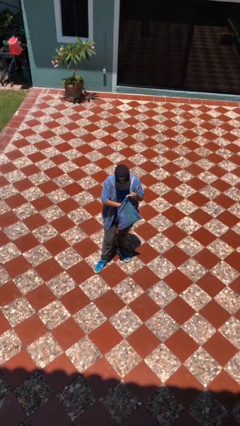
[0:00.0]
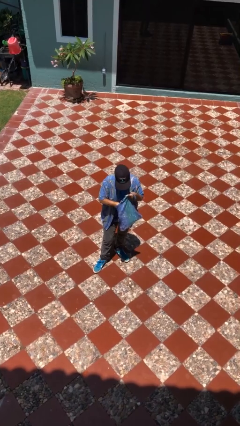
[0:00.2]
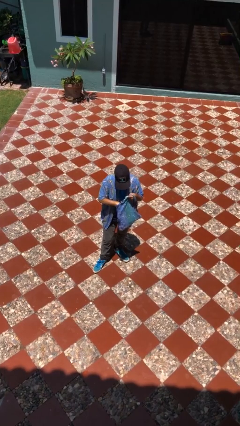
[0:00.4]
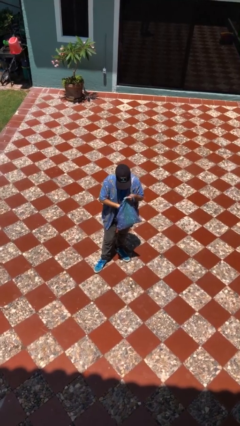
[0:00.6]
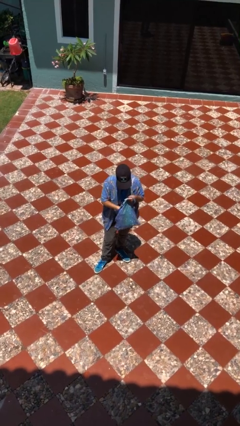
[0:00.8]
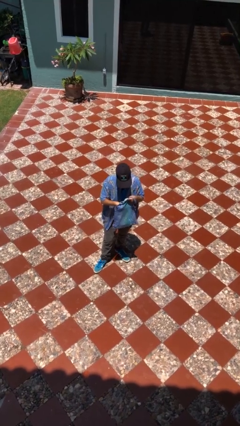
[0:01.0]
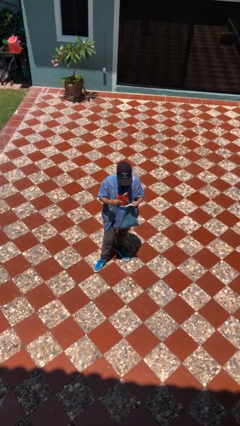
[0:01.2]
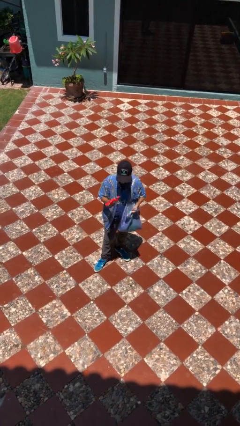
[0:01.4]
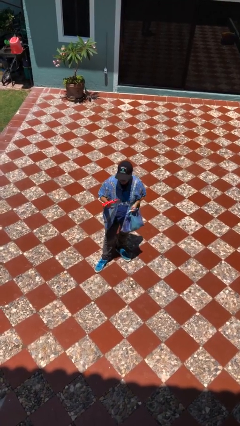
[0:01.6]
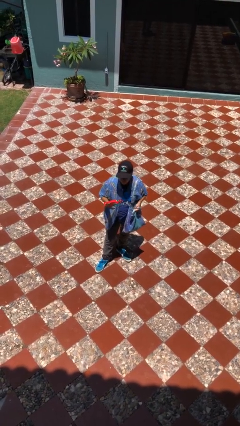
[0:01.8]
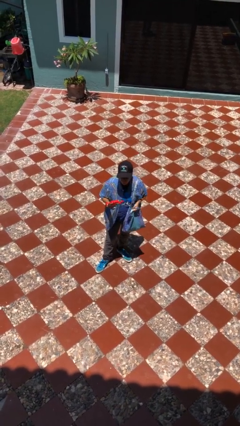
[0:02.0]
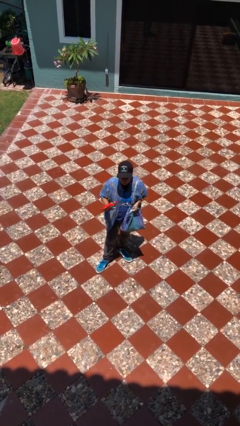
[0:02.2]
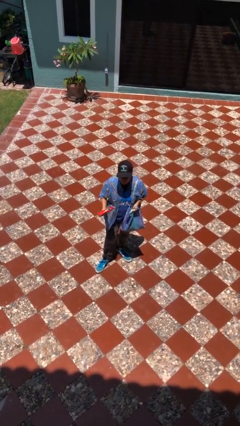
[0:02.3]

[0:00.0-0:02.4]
person takes object from purse

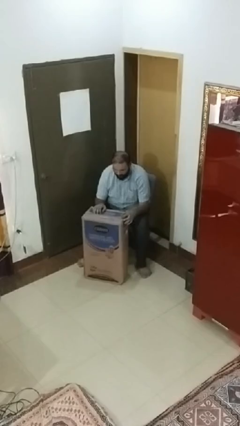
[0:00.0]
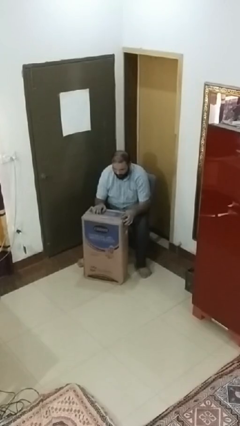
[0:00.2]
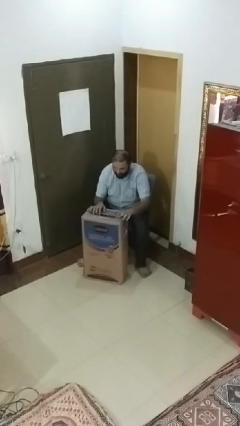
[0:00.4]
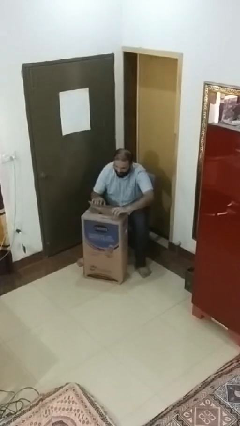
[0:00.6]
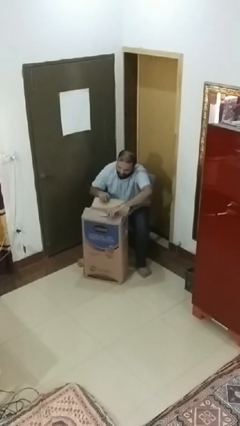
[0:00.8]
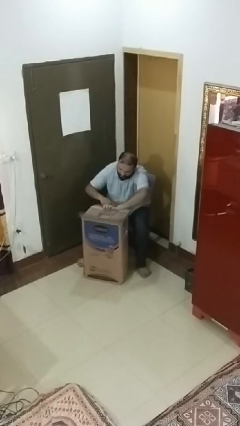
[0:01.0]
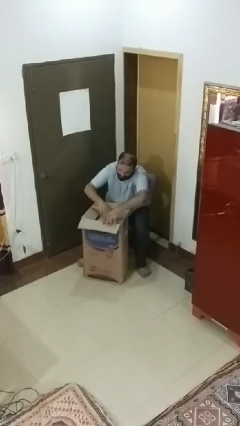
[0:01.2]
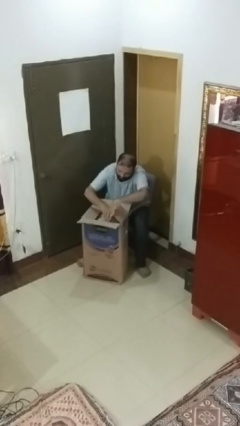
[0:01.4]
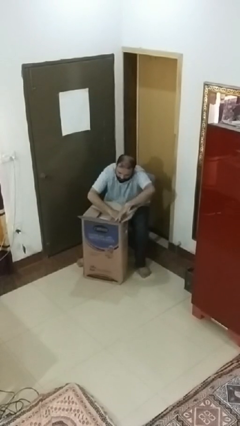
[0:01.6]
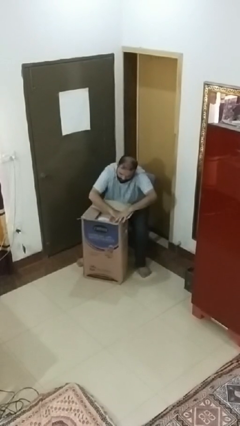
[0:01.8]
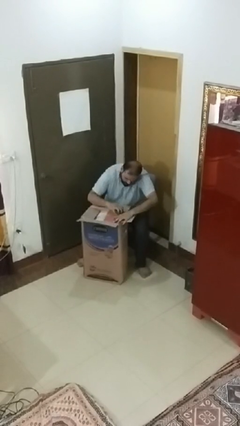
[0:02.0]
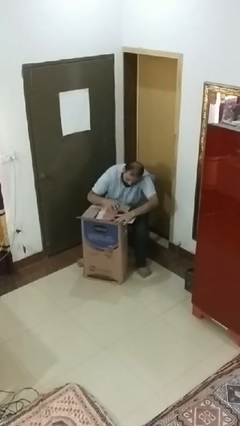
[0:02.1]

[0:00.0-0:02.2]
person searches in box

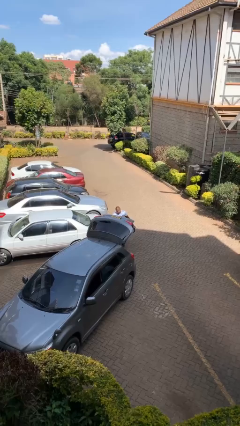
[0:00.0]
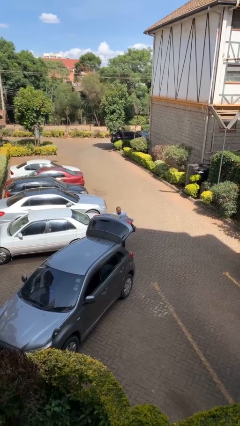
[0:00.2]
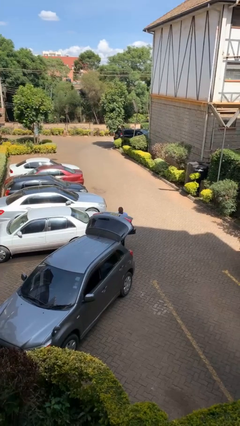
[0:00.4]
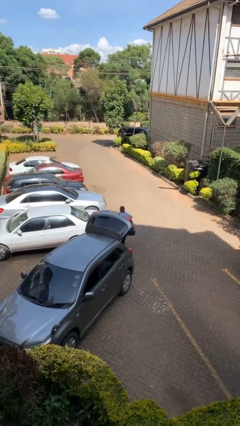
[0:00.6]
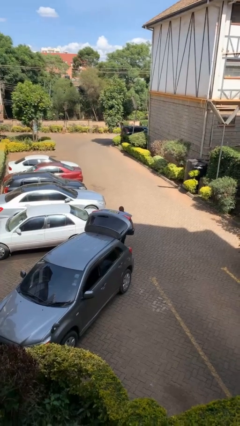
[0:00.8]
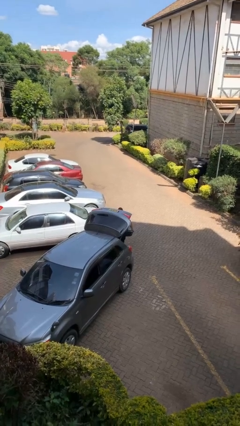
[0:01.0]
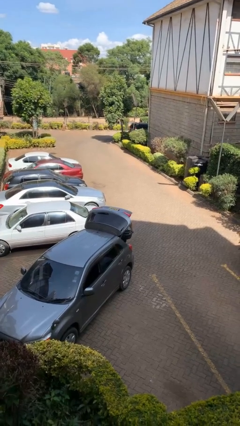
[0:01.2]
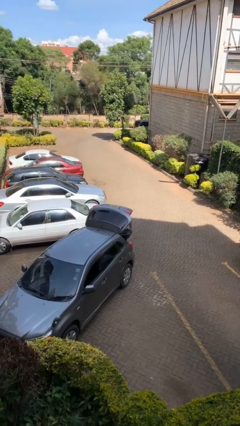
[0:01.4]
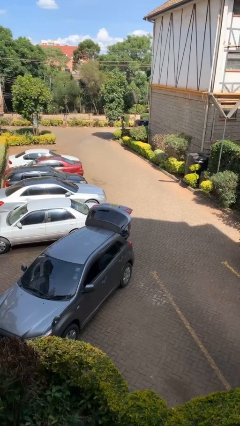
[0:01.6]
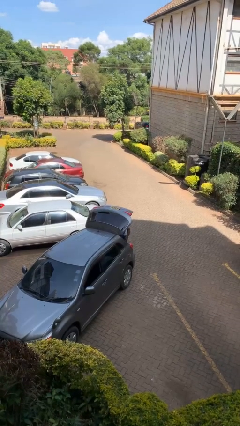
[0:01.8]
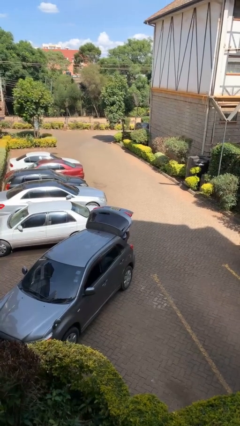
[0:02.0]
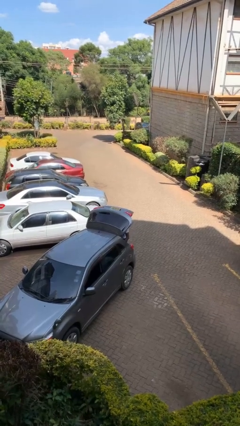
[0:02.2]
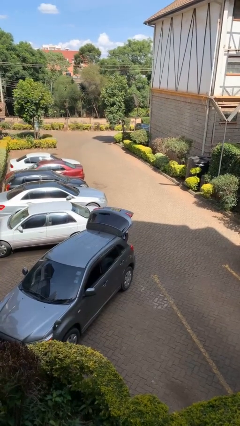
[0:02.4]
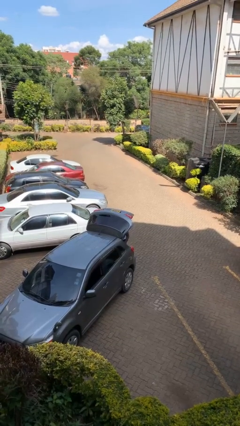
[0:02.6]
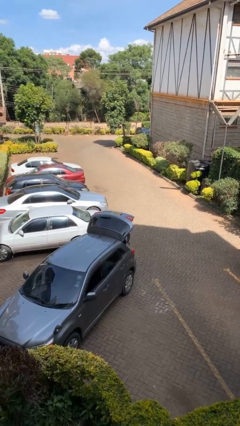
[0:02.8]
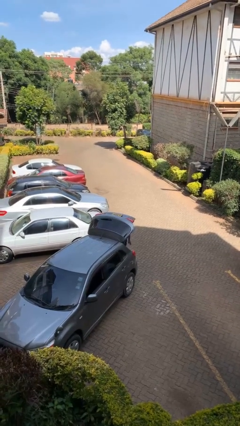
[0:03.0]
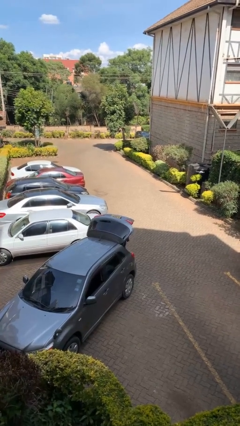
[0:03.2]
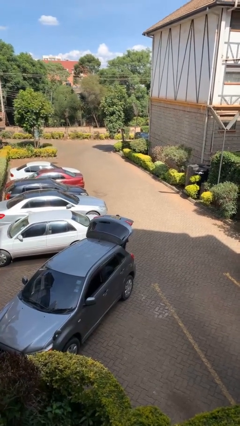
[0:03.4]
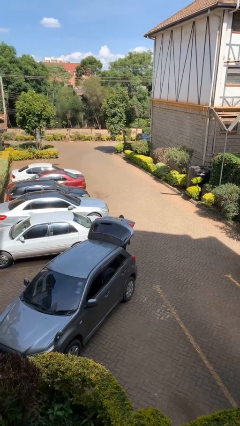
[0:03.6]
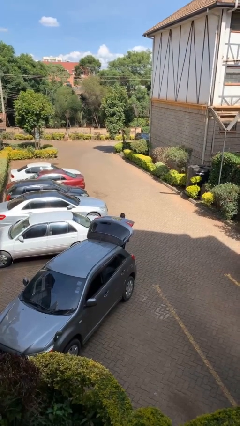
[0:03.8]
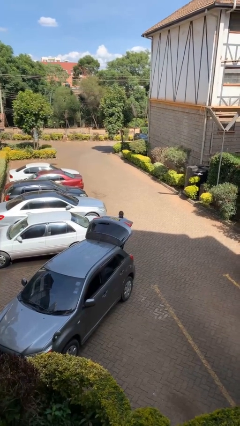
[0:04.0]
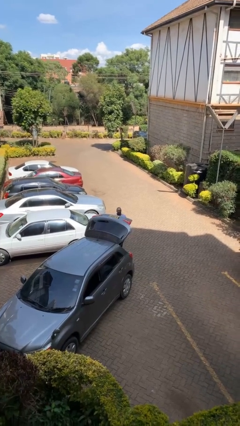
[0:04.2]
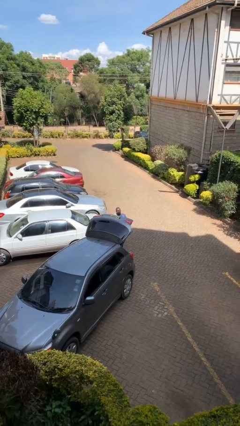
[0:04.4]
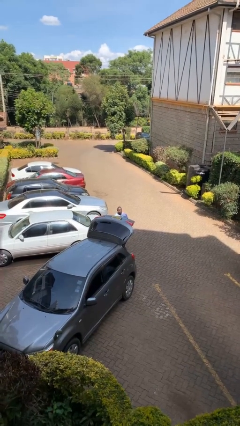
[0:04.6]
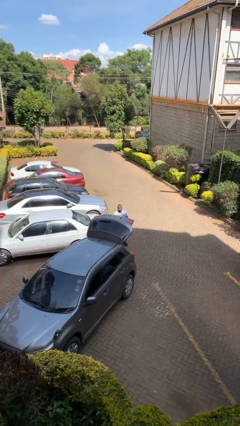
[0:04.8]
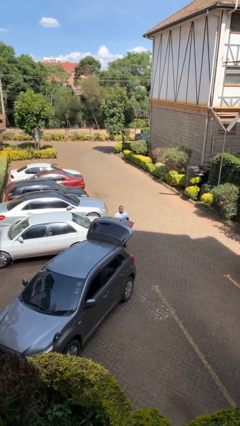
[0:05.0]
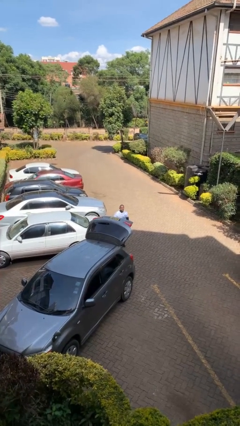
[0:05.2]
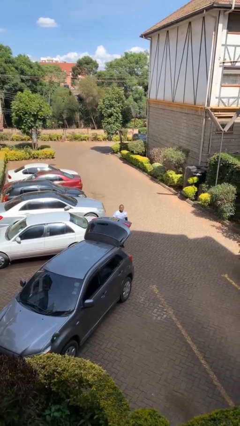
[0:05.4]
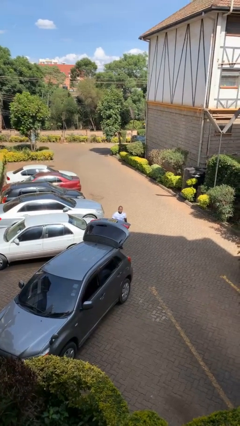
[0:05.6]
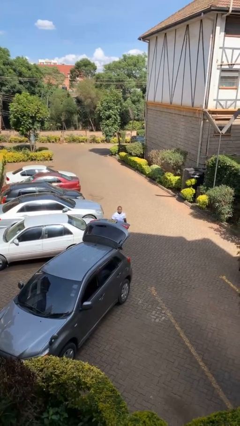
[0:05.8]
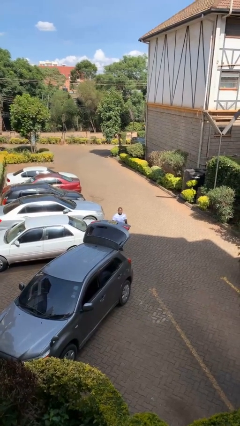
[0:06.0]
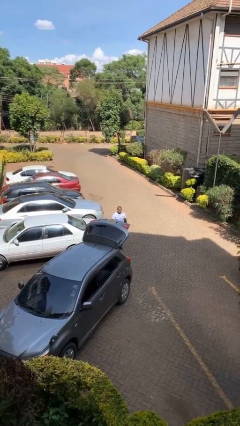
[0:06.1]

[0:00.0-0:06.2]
person loads car

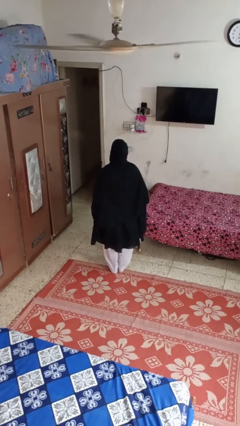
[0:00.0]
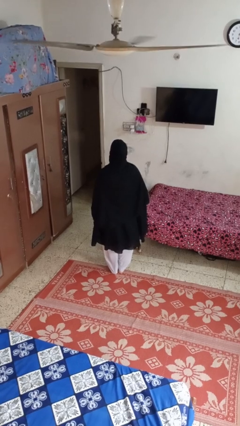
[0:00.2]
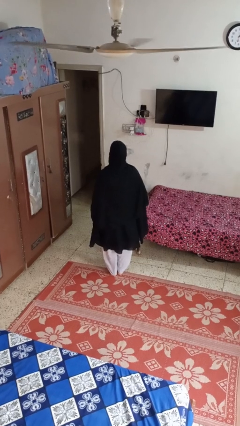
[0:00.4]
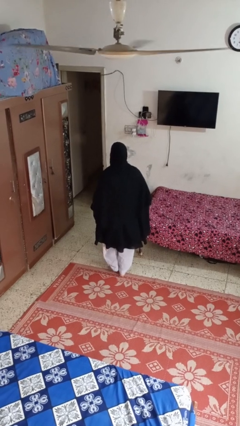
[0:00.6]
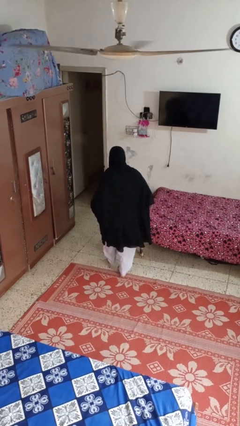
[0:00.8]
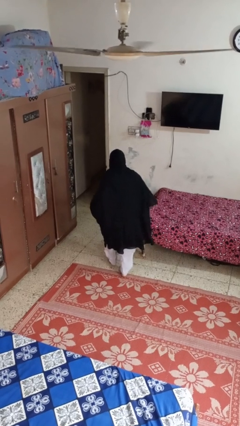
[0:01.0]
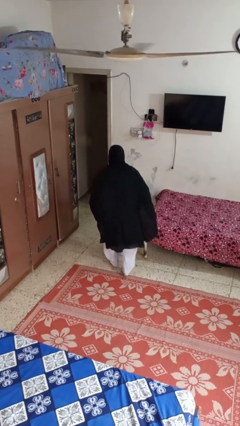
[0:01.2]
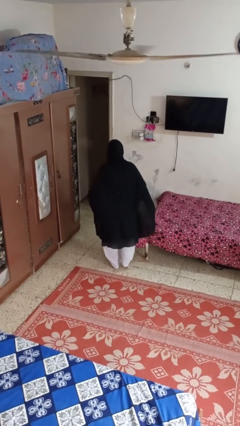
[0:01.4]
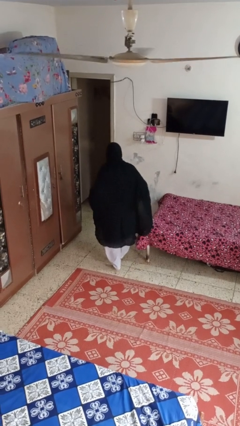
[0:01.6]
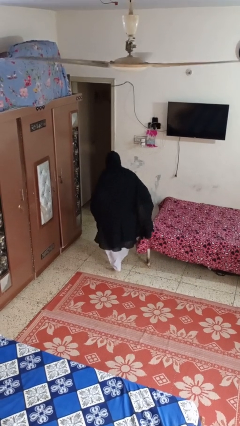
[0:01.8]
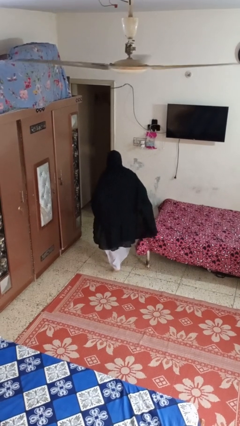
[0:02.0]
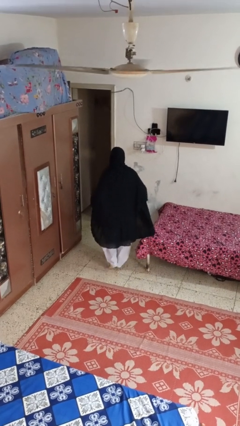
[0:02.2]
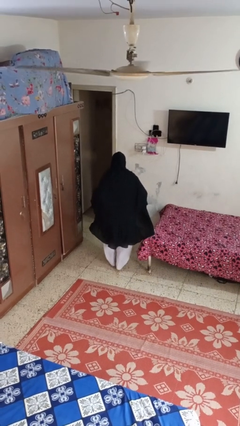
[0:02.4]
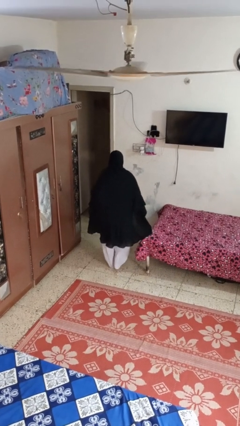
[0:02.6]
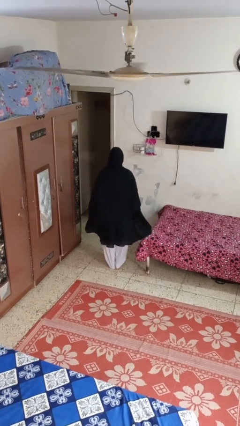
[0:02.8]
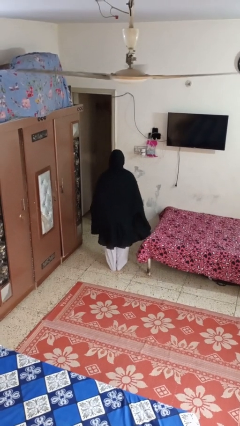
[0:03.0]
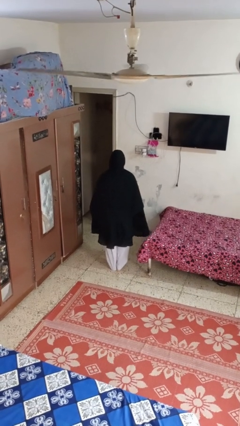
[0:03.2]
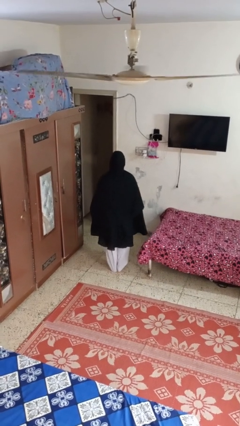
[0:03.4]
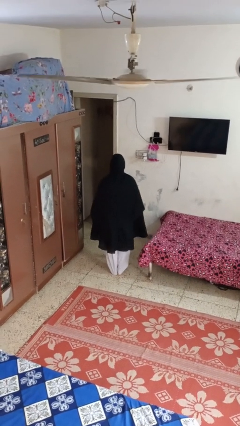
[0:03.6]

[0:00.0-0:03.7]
person walks tiptoe

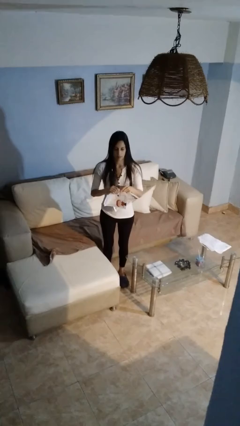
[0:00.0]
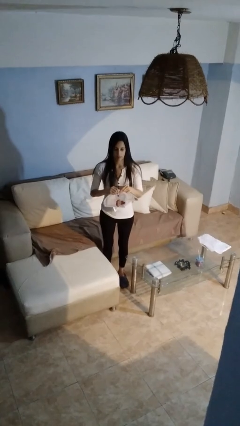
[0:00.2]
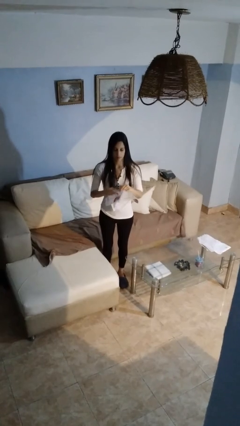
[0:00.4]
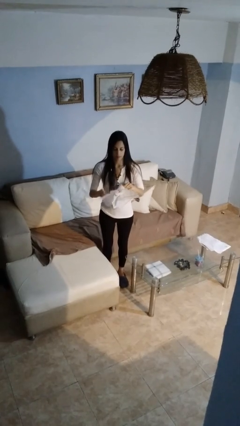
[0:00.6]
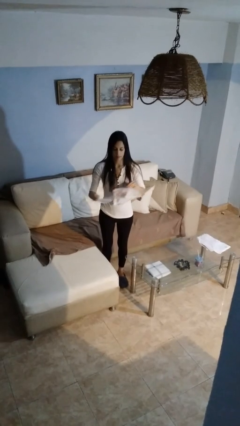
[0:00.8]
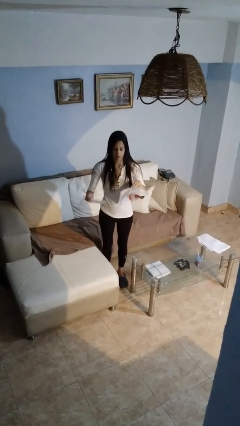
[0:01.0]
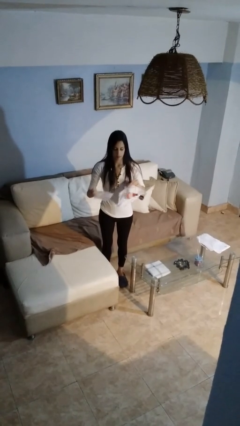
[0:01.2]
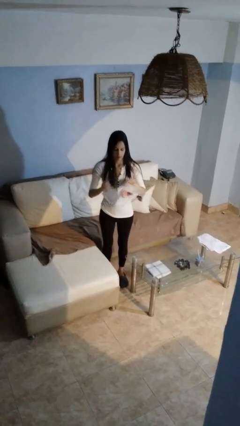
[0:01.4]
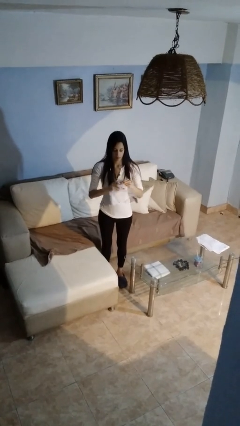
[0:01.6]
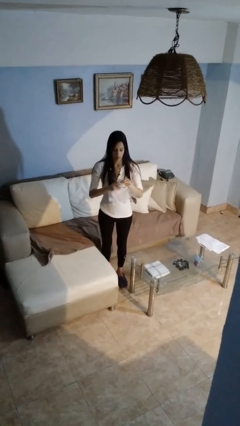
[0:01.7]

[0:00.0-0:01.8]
person tears paper

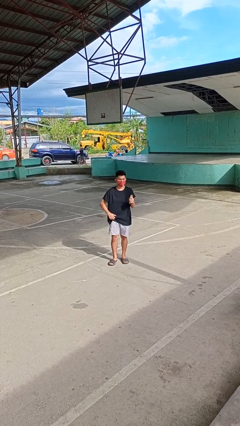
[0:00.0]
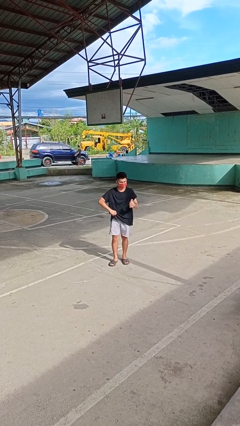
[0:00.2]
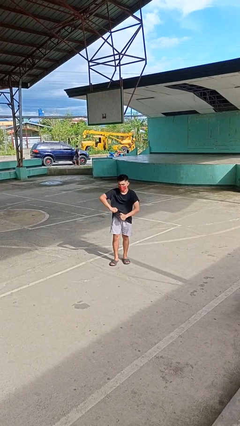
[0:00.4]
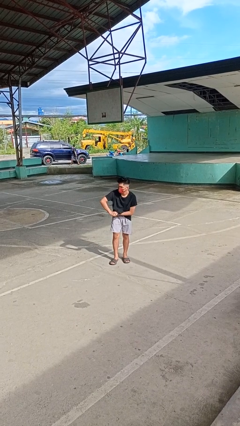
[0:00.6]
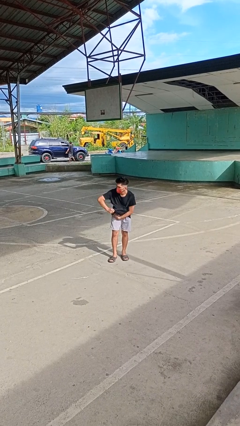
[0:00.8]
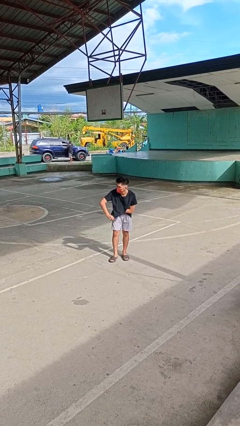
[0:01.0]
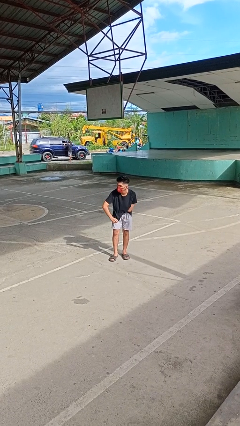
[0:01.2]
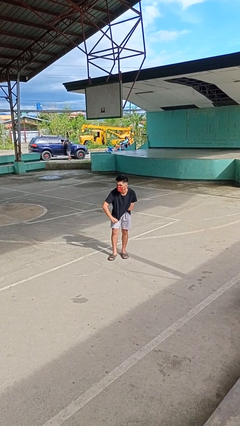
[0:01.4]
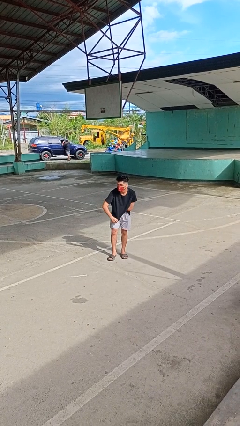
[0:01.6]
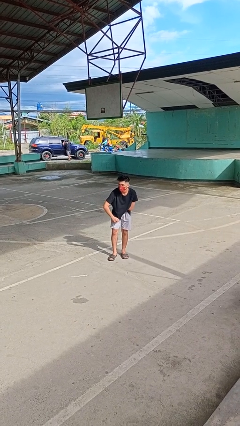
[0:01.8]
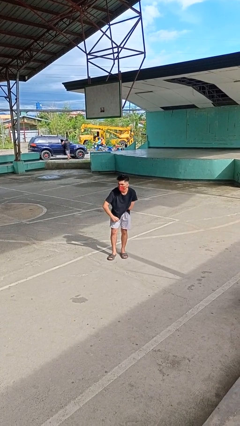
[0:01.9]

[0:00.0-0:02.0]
person applies deodorant
